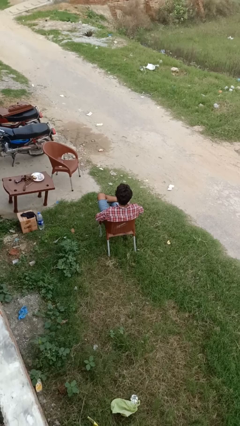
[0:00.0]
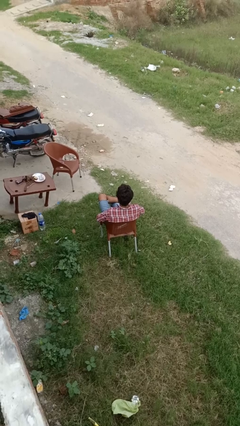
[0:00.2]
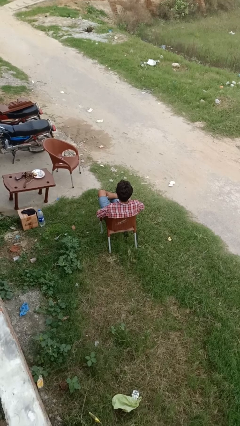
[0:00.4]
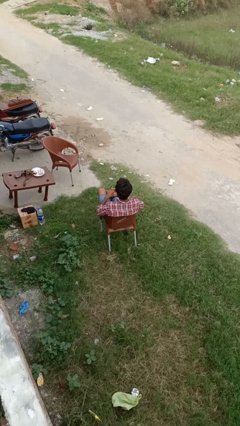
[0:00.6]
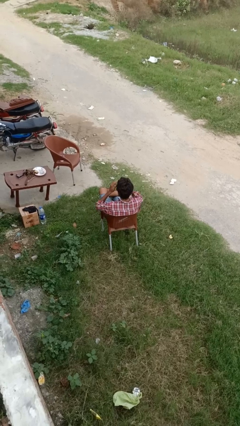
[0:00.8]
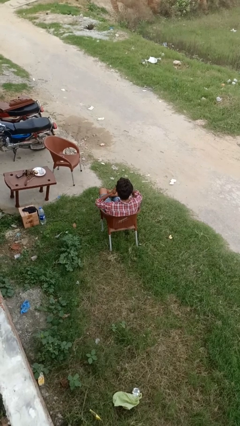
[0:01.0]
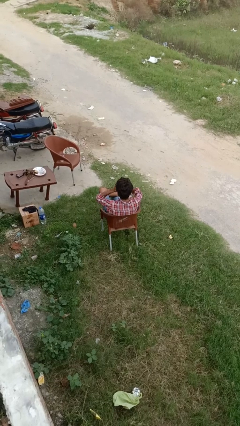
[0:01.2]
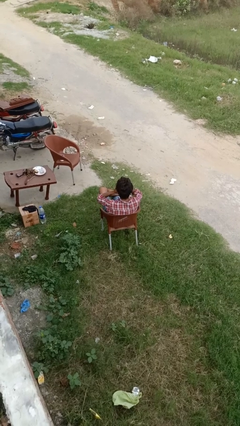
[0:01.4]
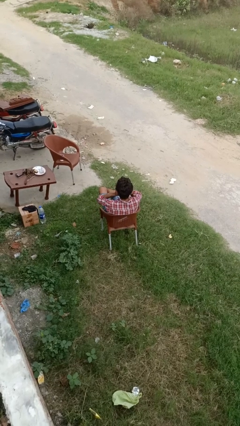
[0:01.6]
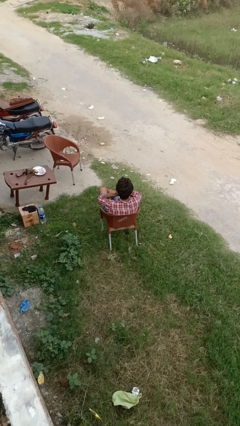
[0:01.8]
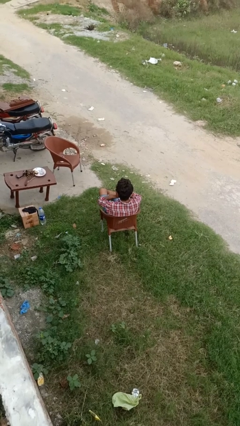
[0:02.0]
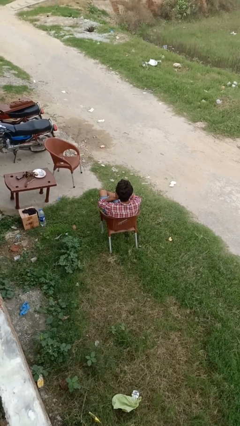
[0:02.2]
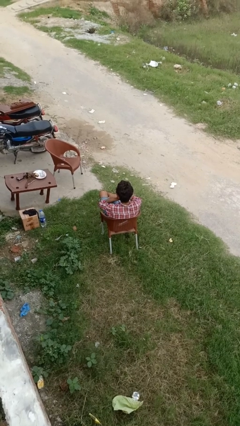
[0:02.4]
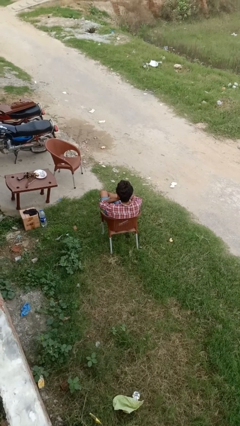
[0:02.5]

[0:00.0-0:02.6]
person applies sunscreen

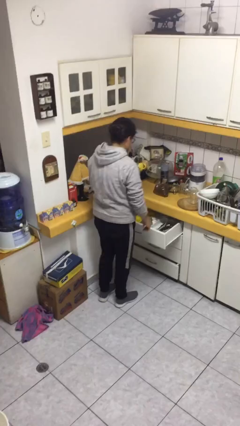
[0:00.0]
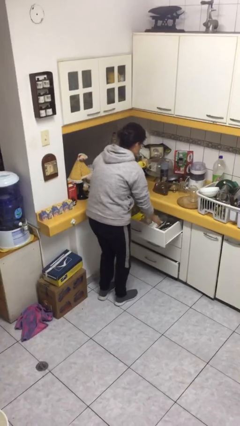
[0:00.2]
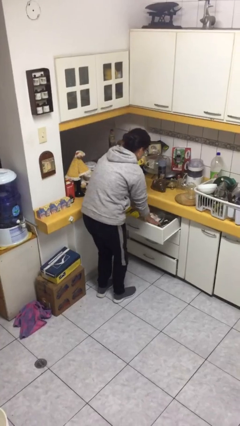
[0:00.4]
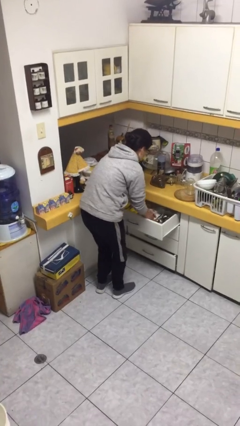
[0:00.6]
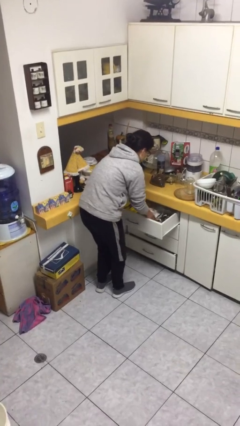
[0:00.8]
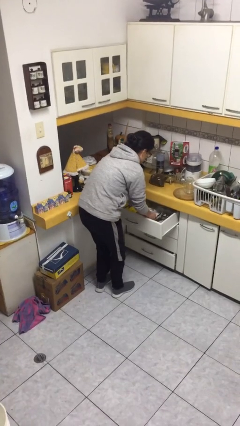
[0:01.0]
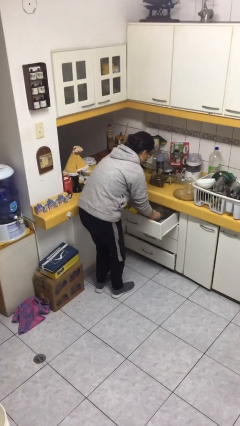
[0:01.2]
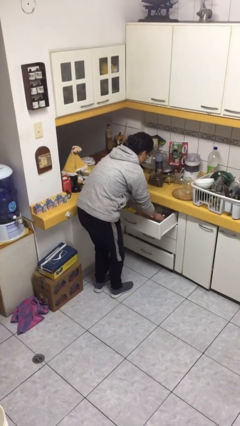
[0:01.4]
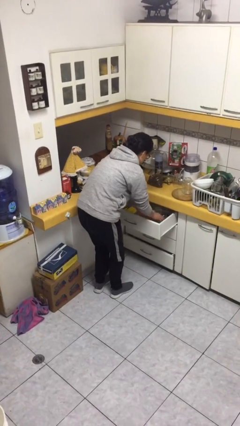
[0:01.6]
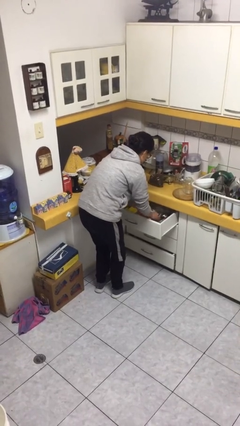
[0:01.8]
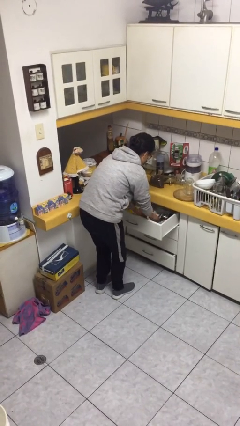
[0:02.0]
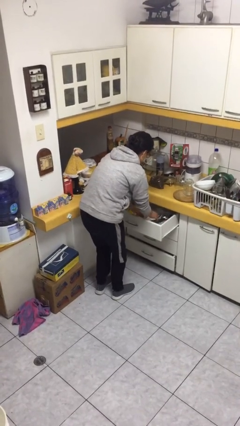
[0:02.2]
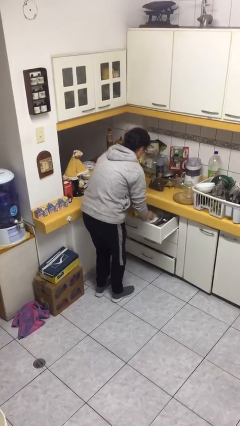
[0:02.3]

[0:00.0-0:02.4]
person searches in kitchen drawer

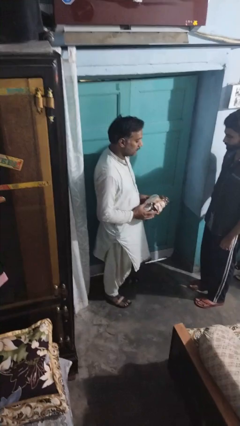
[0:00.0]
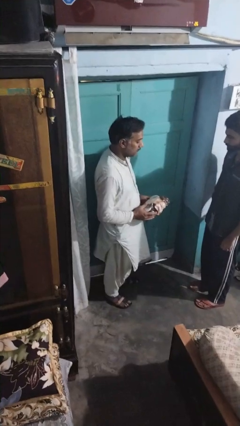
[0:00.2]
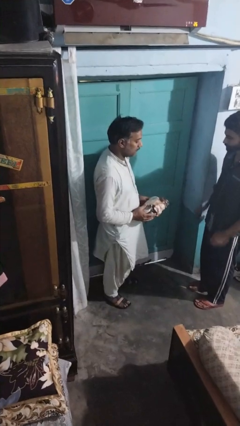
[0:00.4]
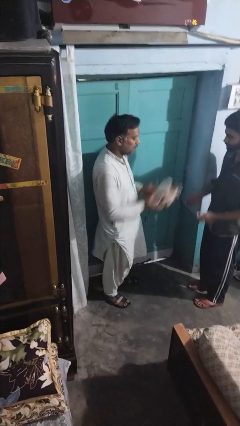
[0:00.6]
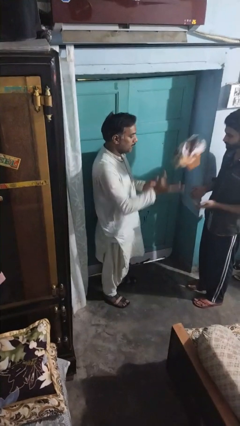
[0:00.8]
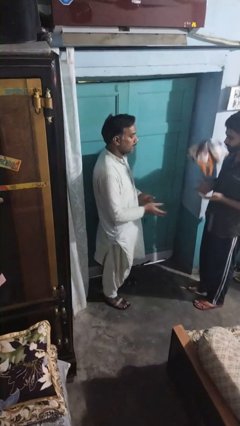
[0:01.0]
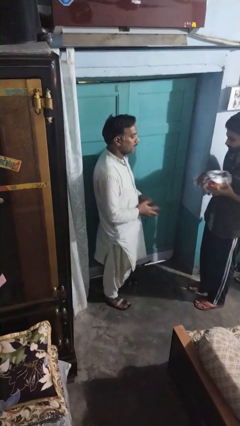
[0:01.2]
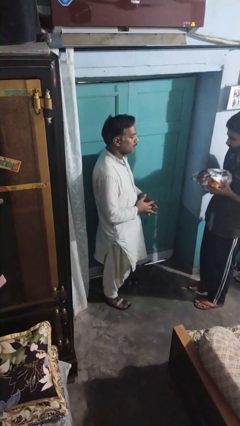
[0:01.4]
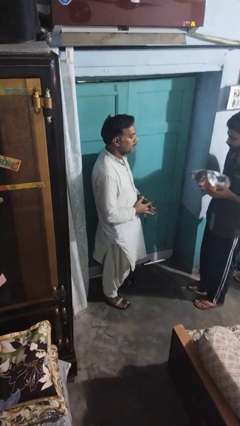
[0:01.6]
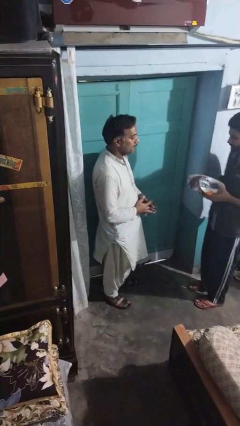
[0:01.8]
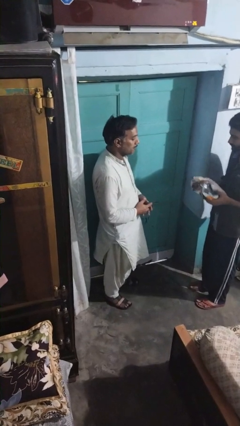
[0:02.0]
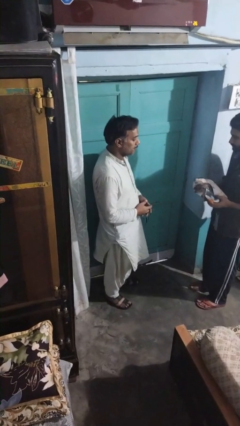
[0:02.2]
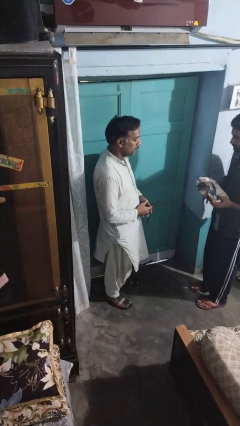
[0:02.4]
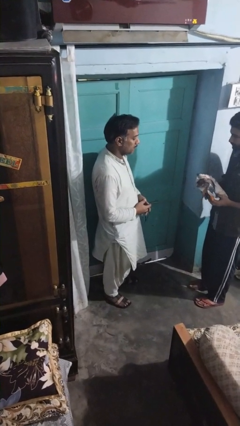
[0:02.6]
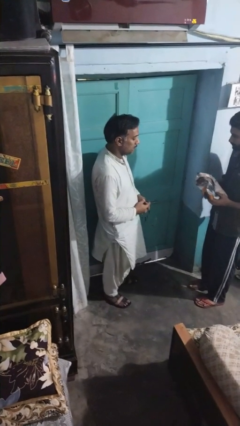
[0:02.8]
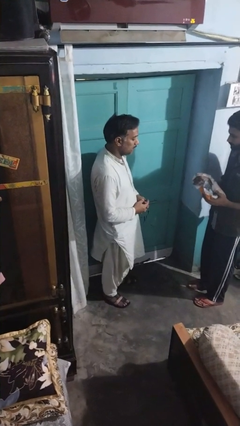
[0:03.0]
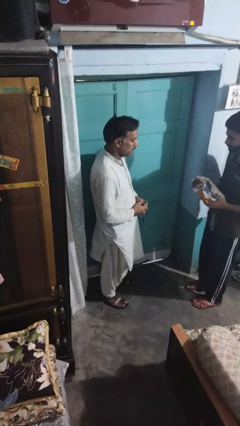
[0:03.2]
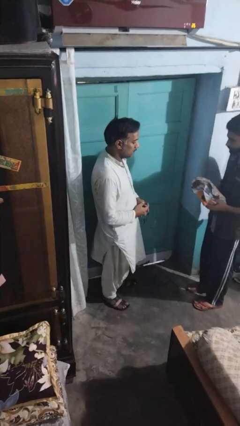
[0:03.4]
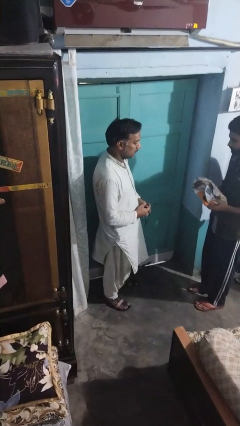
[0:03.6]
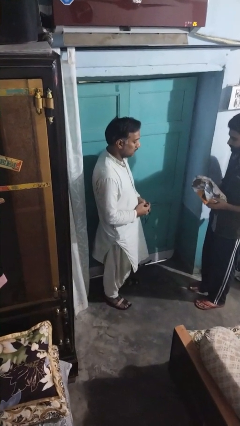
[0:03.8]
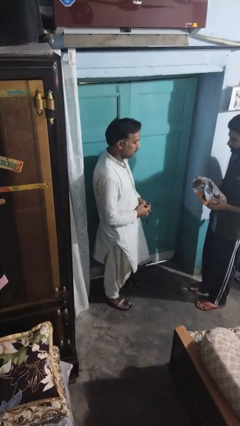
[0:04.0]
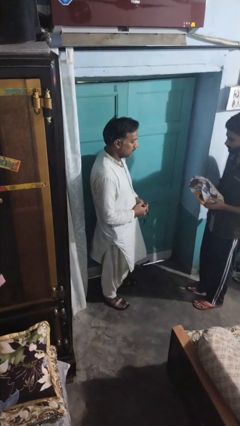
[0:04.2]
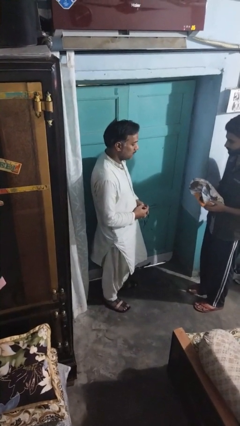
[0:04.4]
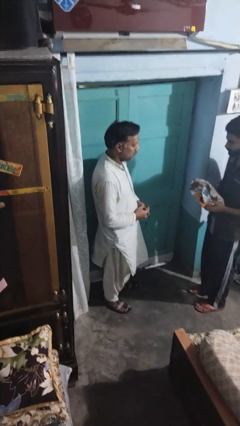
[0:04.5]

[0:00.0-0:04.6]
person throws object to person

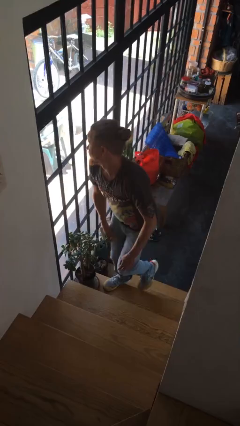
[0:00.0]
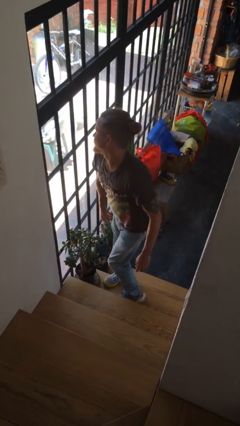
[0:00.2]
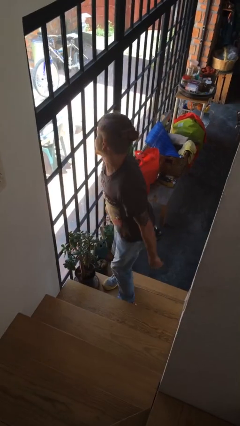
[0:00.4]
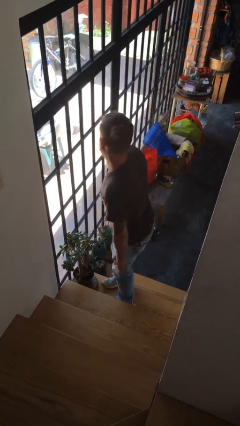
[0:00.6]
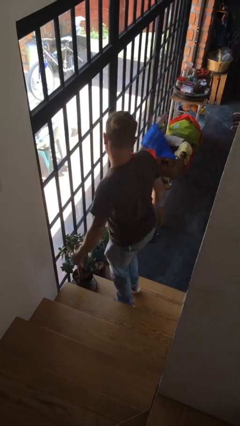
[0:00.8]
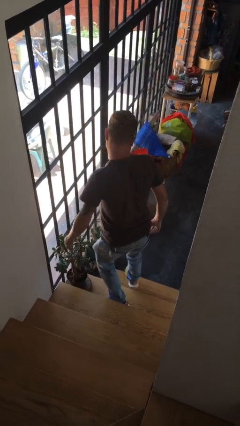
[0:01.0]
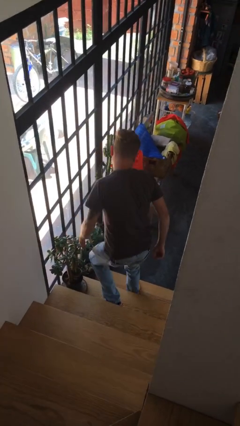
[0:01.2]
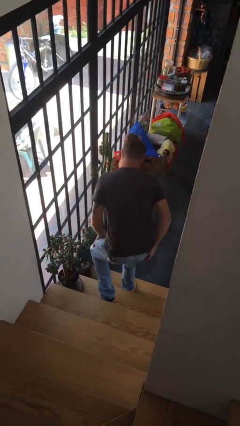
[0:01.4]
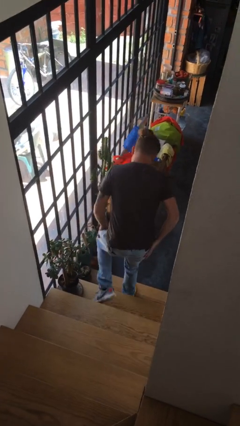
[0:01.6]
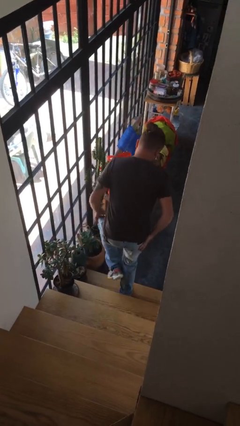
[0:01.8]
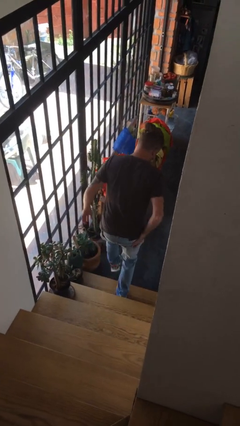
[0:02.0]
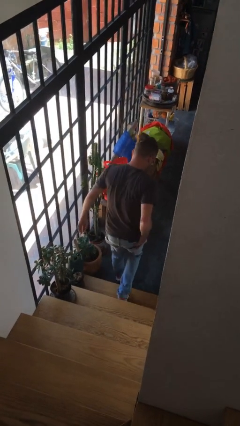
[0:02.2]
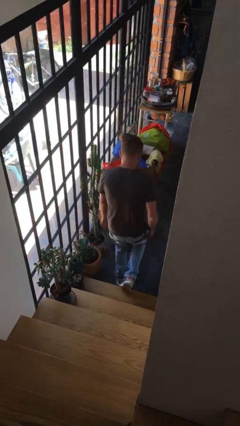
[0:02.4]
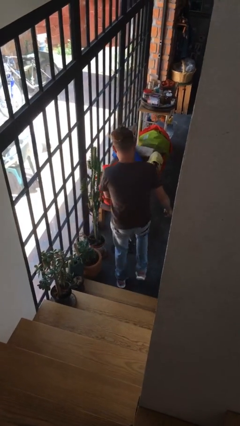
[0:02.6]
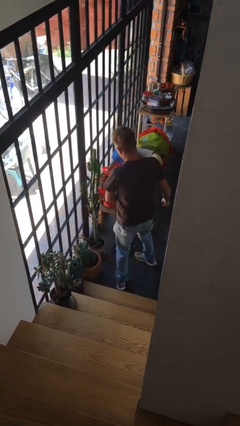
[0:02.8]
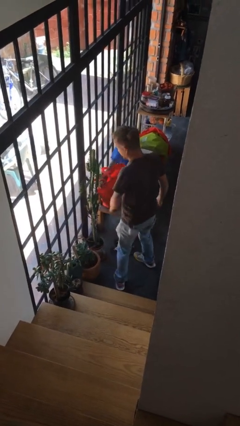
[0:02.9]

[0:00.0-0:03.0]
person climbs down stairs

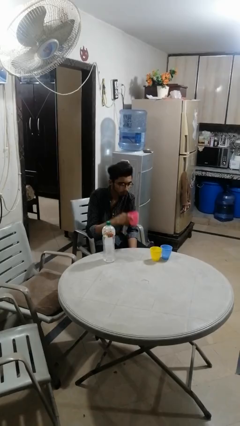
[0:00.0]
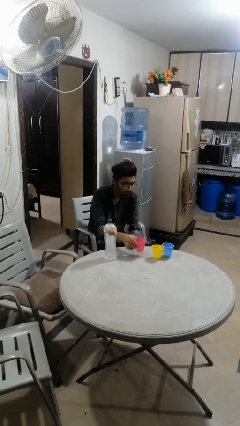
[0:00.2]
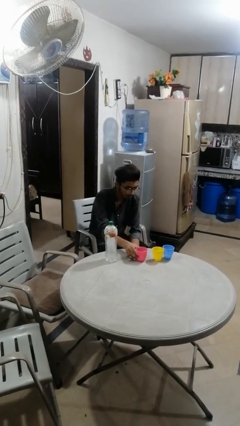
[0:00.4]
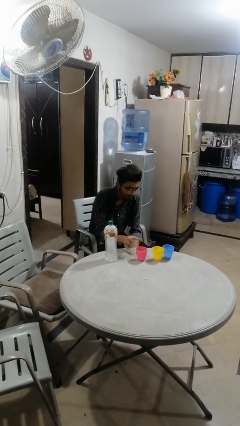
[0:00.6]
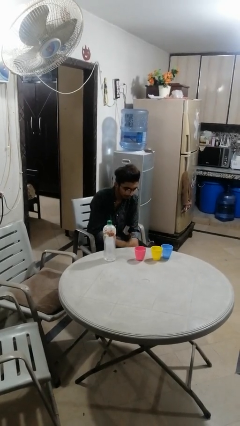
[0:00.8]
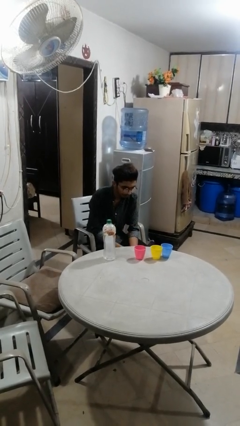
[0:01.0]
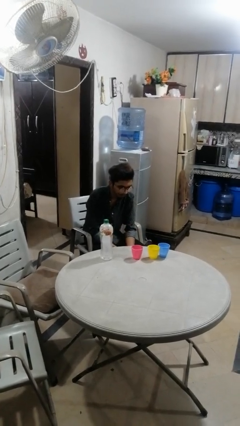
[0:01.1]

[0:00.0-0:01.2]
person puts down object on table

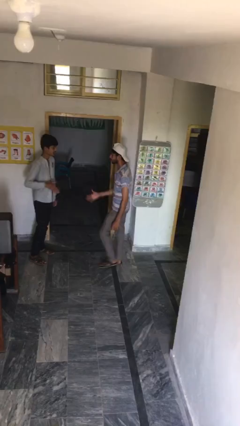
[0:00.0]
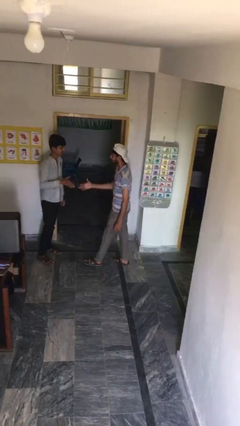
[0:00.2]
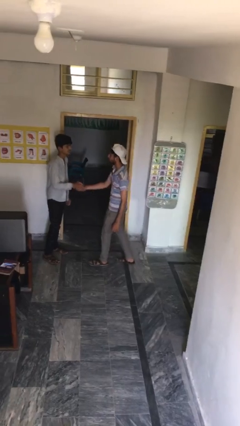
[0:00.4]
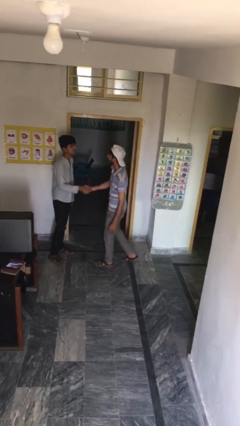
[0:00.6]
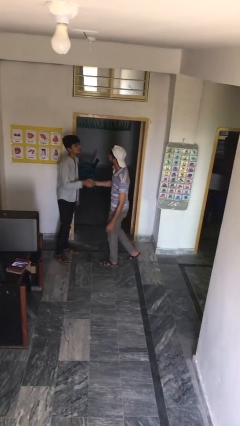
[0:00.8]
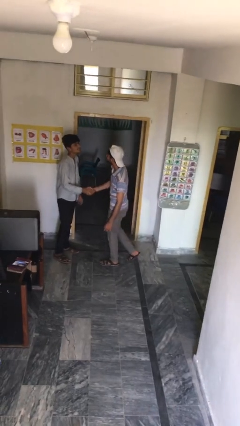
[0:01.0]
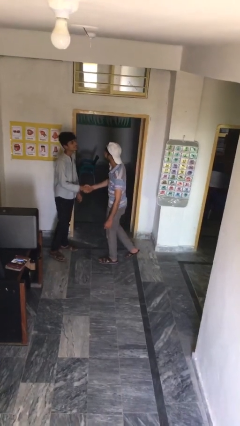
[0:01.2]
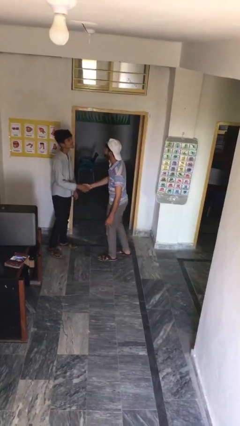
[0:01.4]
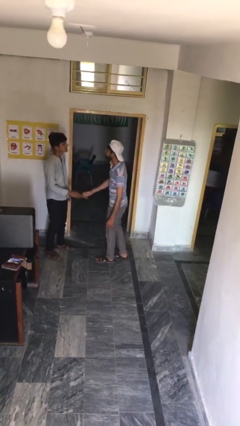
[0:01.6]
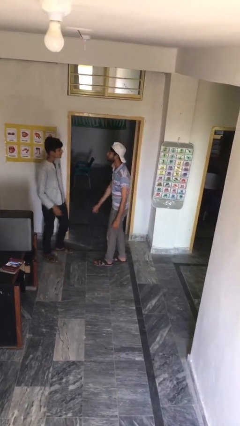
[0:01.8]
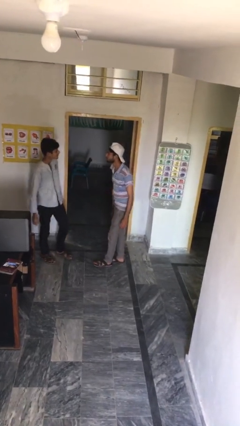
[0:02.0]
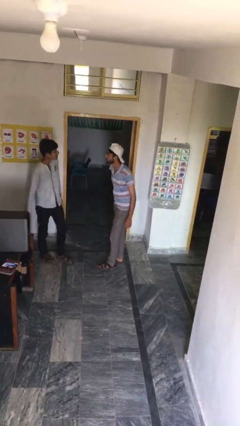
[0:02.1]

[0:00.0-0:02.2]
person shakes hand

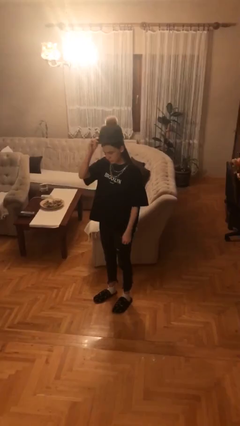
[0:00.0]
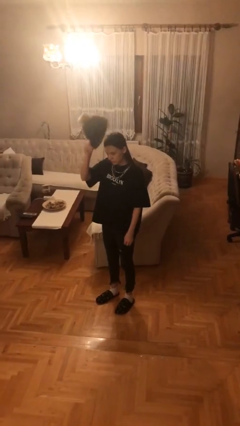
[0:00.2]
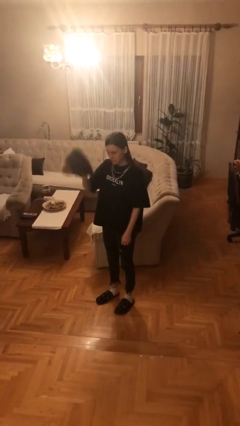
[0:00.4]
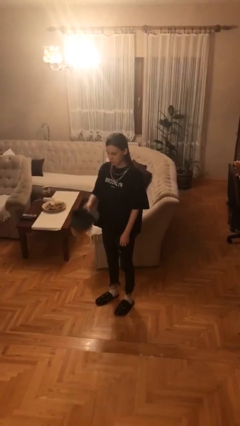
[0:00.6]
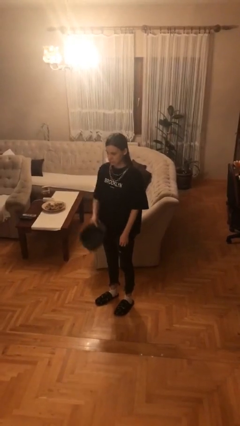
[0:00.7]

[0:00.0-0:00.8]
person takes off hat
